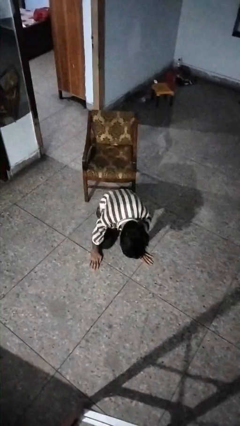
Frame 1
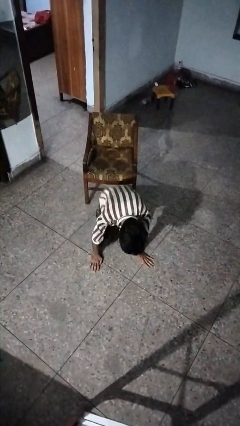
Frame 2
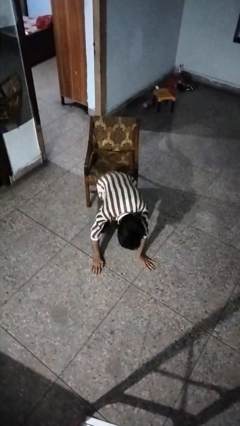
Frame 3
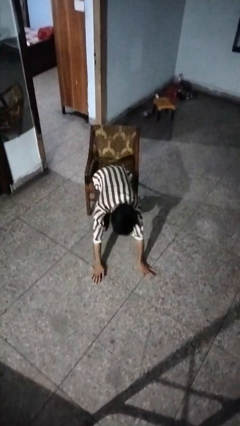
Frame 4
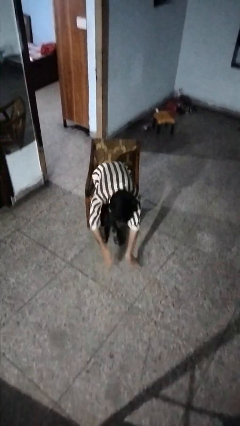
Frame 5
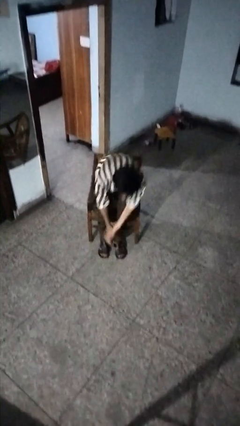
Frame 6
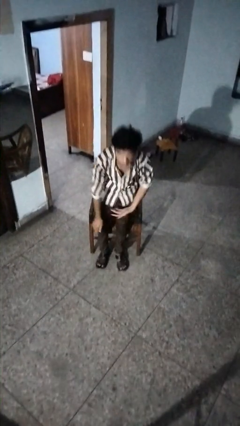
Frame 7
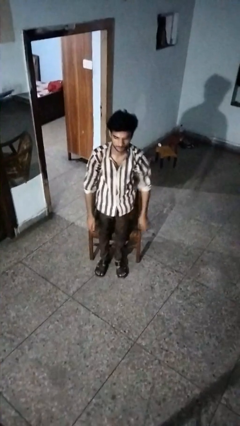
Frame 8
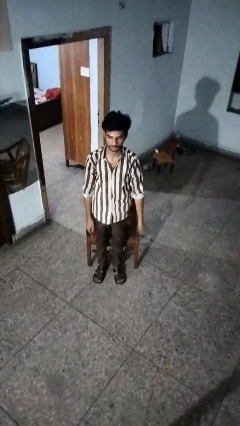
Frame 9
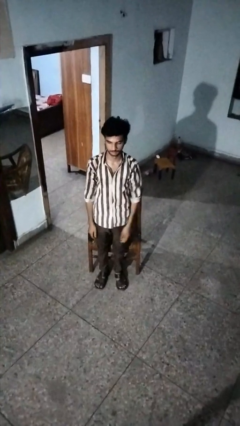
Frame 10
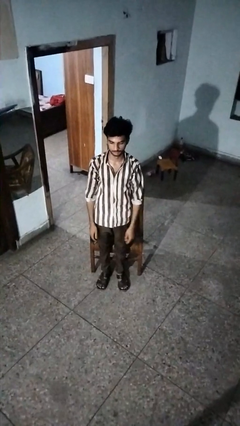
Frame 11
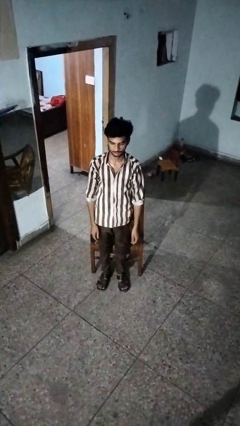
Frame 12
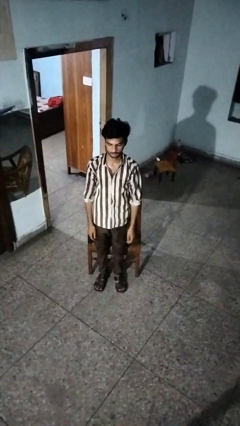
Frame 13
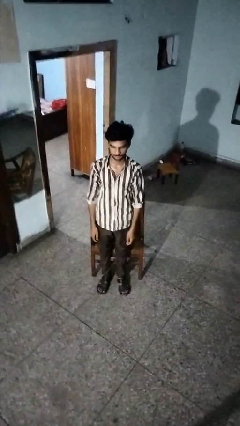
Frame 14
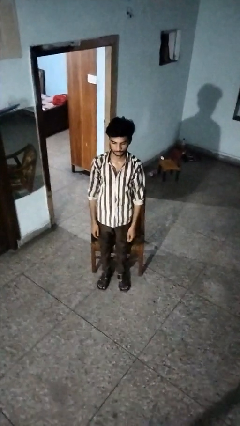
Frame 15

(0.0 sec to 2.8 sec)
person stands up from floor

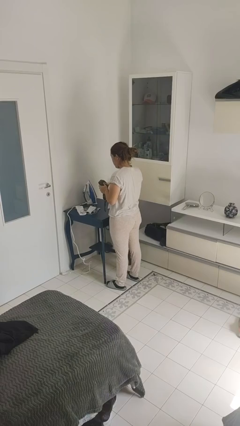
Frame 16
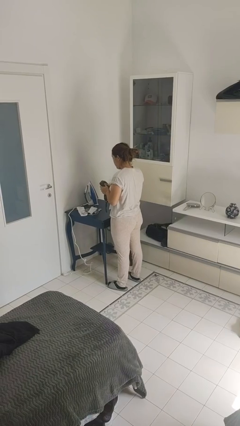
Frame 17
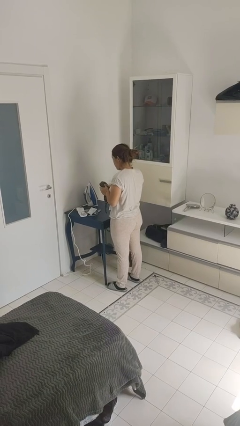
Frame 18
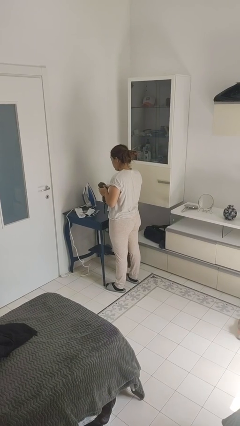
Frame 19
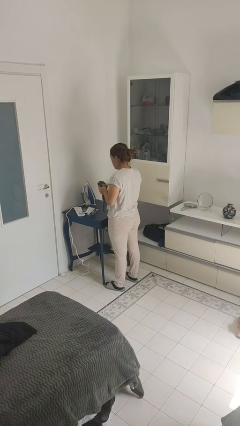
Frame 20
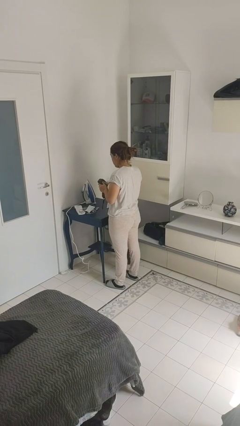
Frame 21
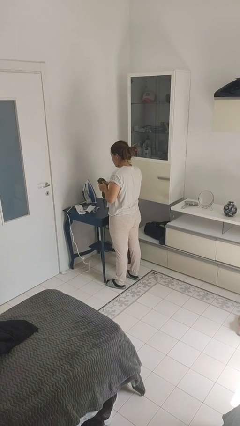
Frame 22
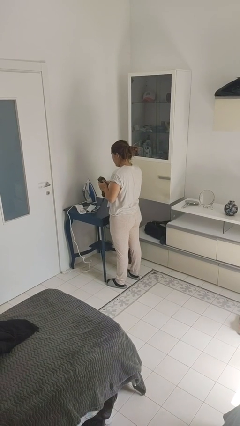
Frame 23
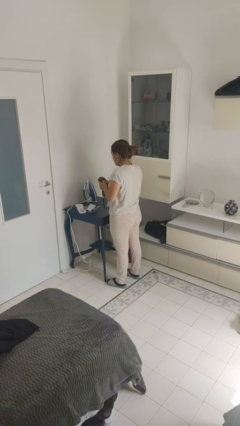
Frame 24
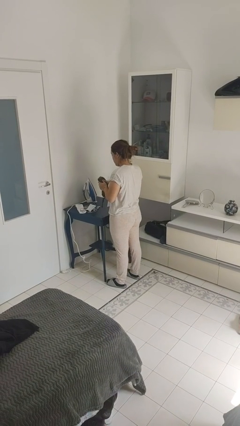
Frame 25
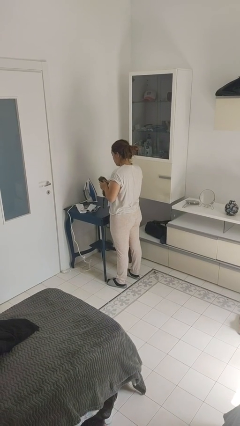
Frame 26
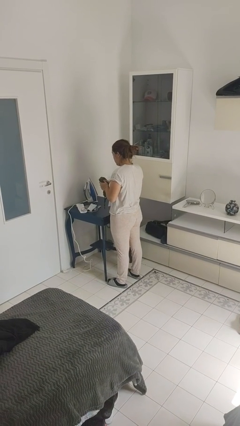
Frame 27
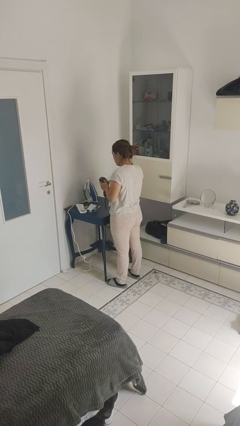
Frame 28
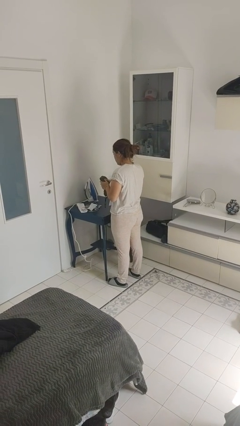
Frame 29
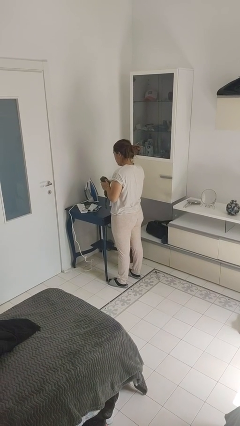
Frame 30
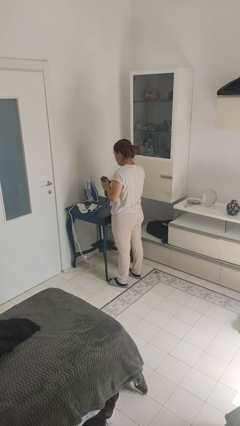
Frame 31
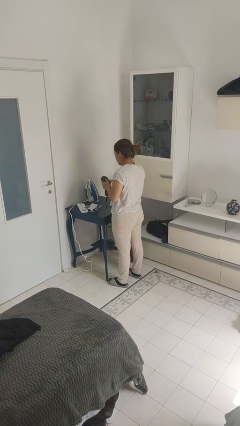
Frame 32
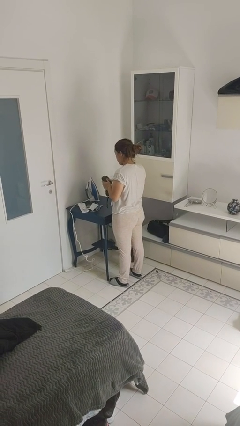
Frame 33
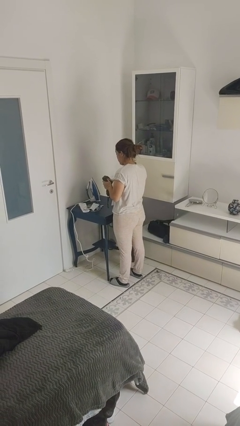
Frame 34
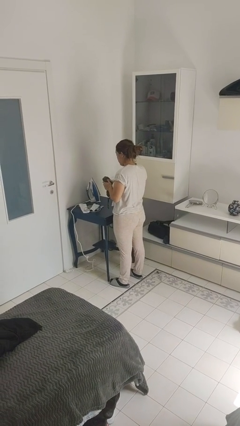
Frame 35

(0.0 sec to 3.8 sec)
person squeezes object

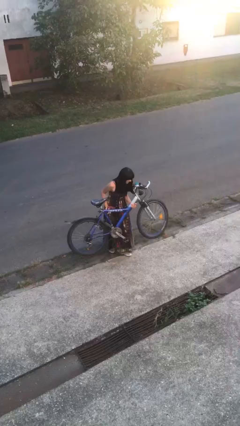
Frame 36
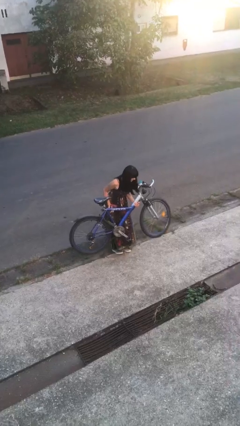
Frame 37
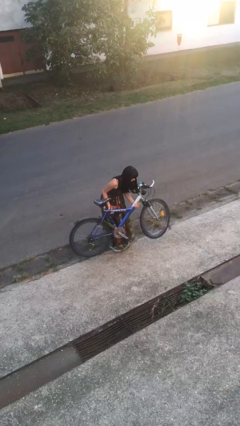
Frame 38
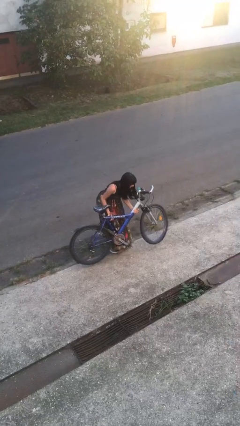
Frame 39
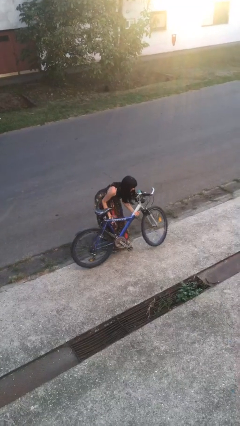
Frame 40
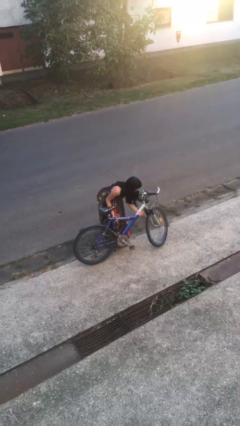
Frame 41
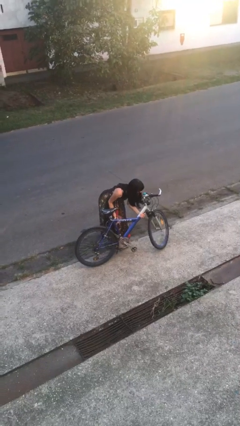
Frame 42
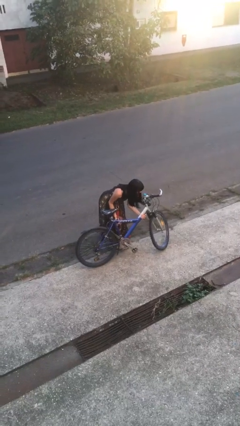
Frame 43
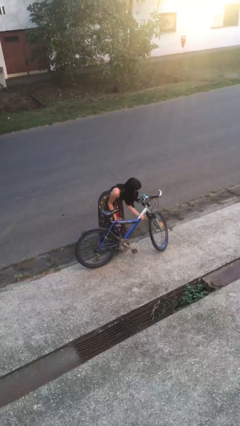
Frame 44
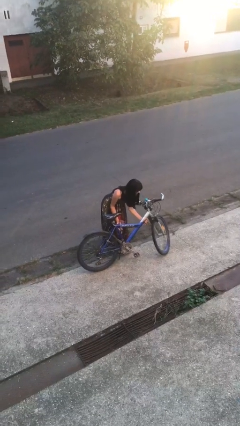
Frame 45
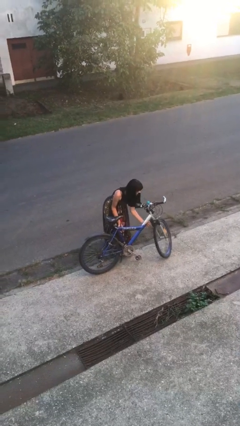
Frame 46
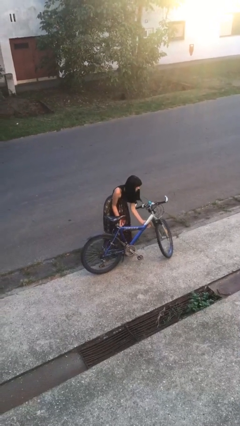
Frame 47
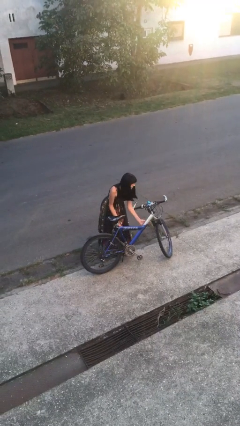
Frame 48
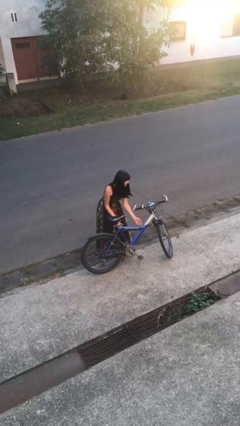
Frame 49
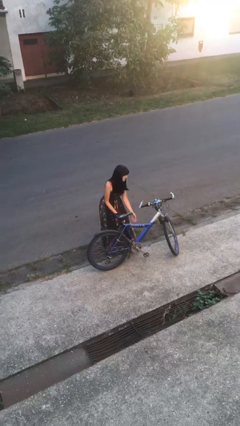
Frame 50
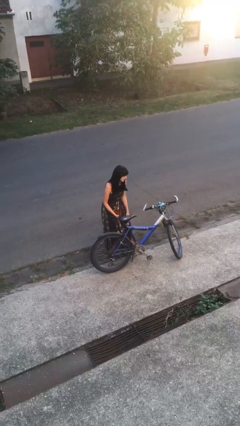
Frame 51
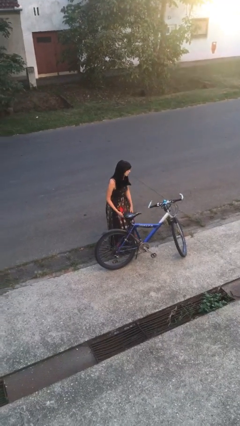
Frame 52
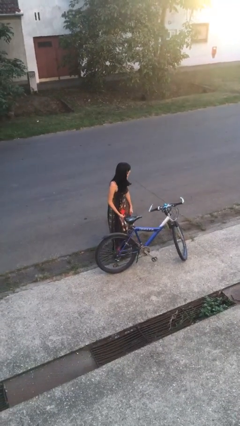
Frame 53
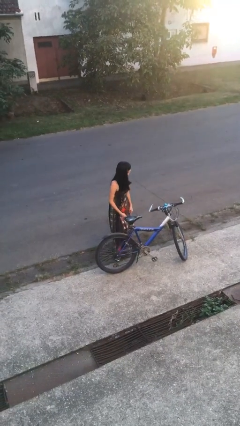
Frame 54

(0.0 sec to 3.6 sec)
person puts down object on floor

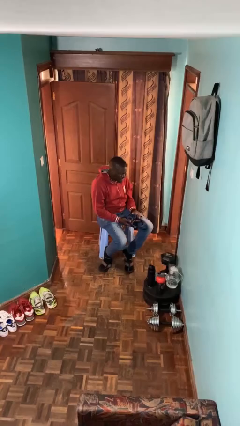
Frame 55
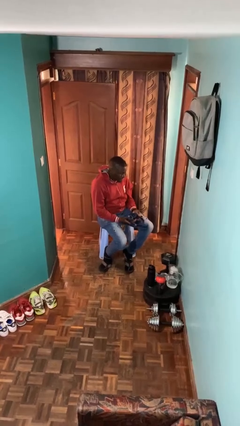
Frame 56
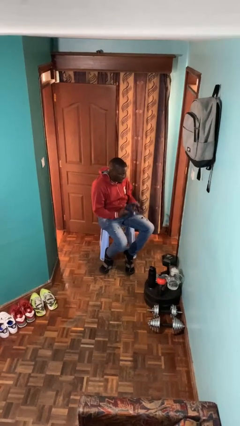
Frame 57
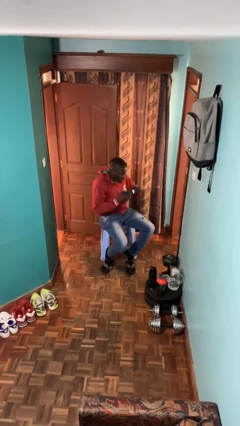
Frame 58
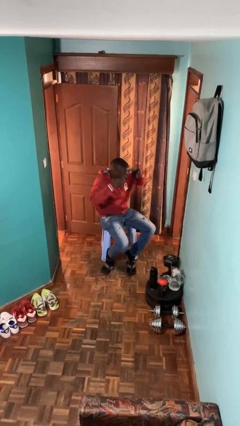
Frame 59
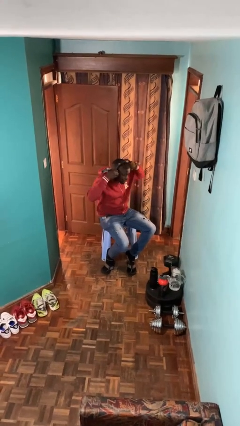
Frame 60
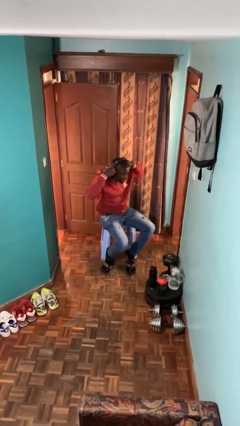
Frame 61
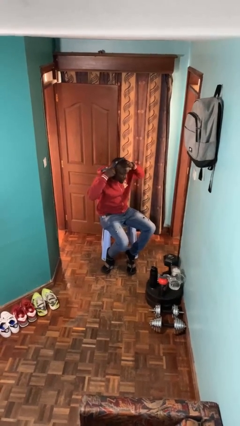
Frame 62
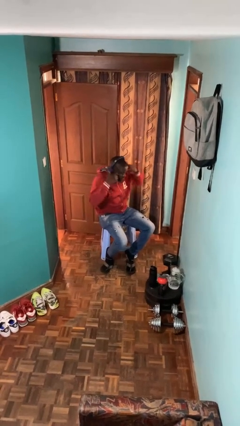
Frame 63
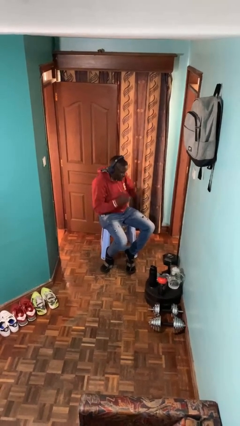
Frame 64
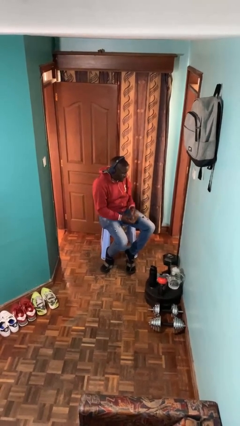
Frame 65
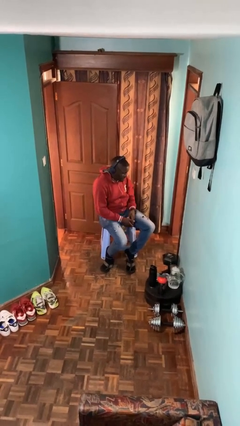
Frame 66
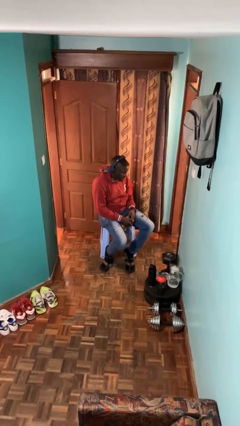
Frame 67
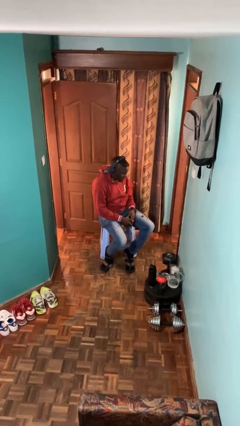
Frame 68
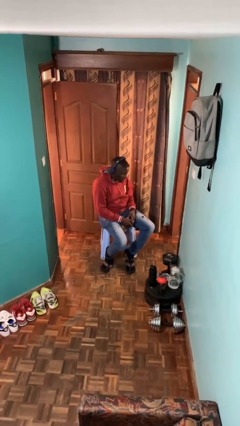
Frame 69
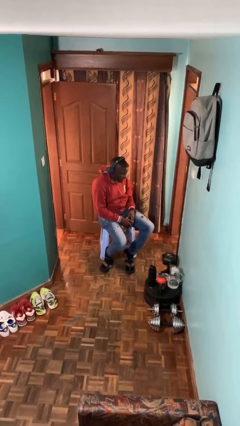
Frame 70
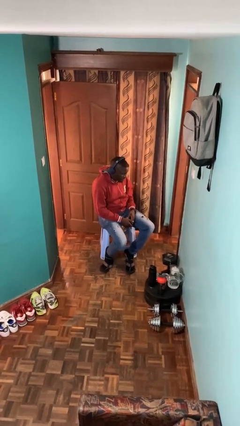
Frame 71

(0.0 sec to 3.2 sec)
person puts on headphones

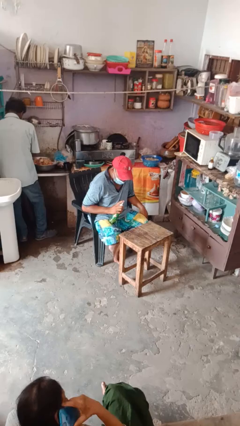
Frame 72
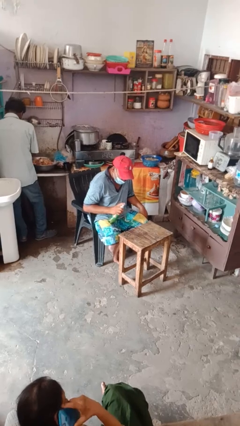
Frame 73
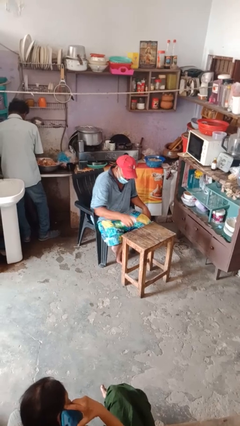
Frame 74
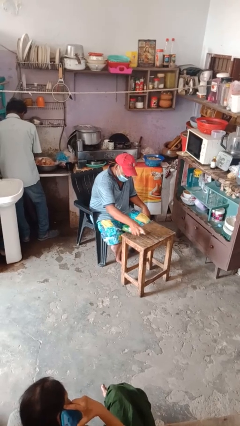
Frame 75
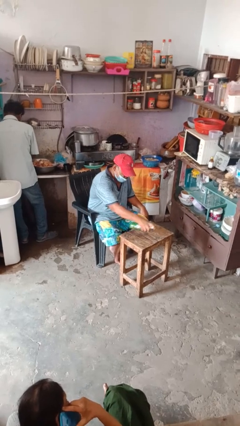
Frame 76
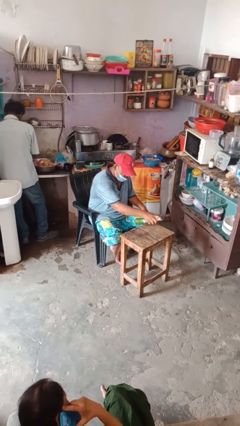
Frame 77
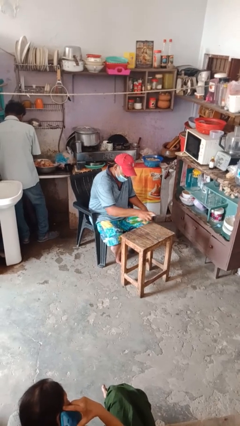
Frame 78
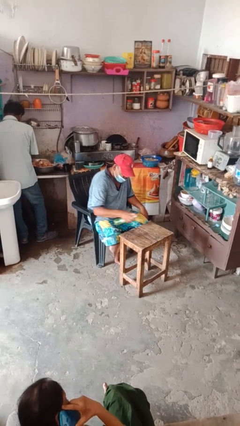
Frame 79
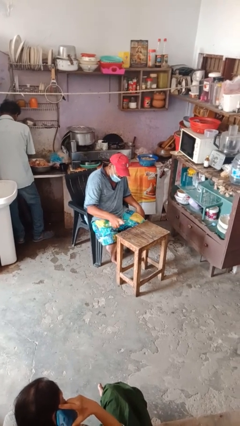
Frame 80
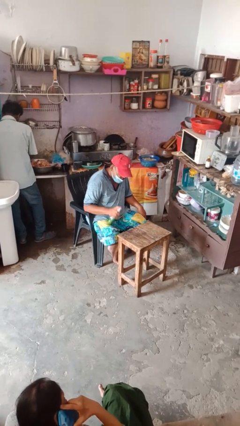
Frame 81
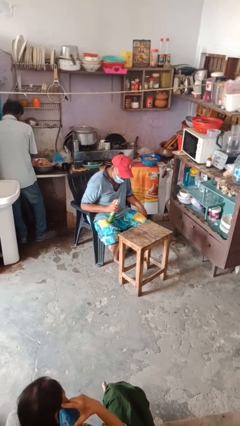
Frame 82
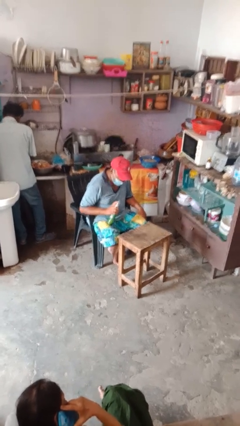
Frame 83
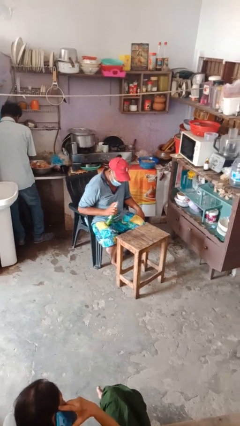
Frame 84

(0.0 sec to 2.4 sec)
person sprays from bottle

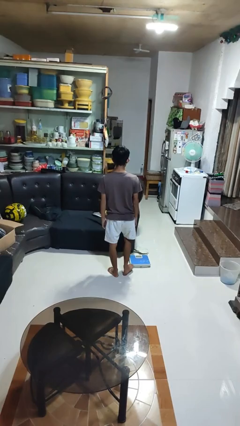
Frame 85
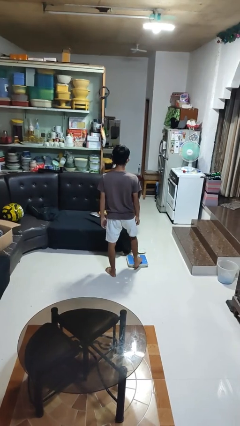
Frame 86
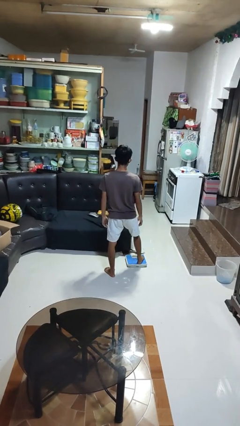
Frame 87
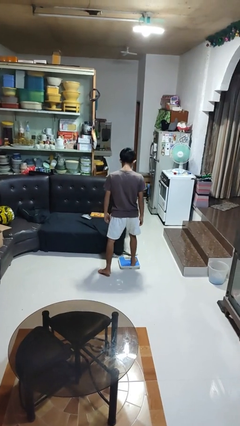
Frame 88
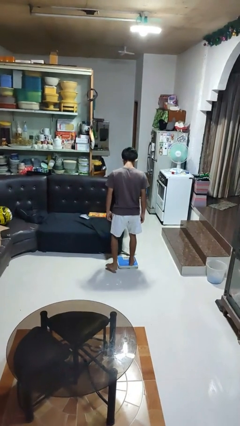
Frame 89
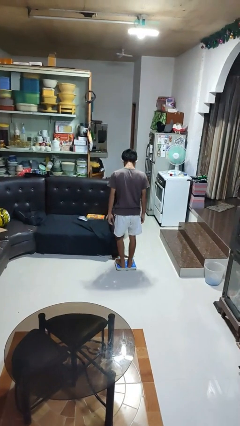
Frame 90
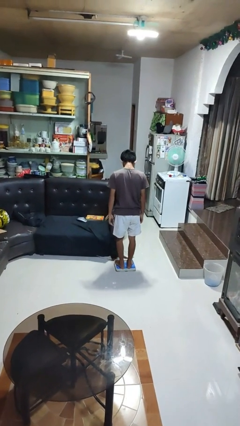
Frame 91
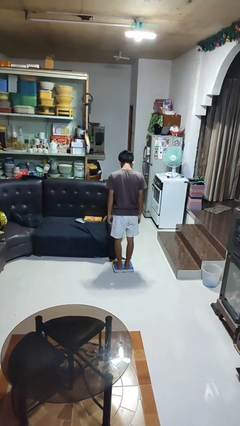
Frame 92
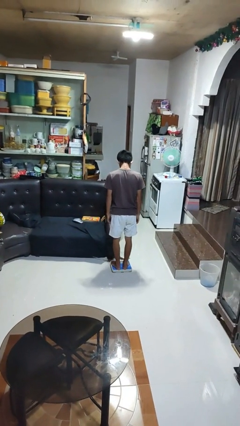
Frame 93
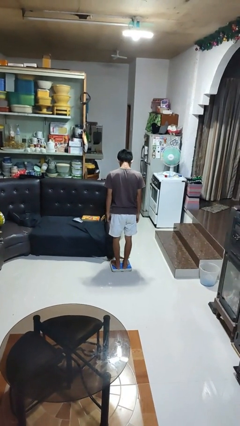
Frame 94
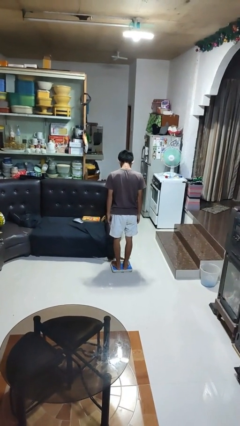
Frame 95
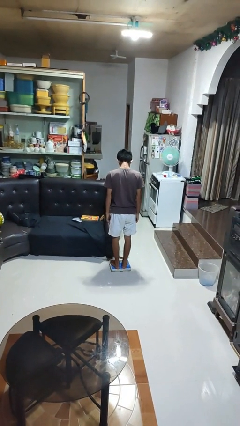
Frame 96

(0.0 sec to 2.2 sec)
person uses bodyweight scale
